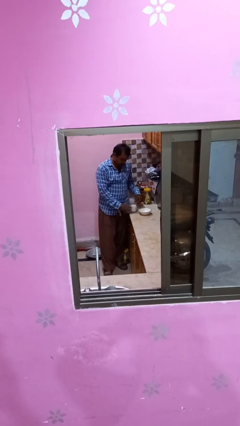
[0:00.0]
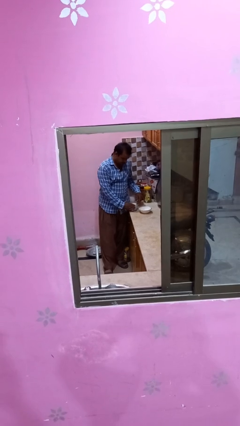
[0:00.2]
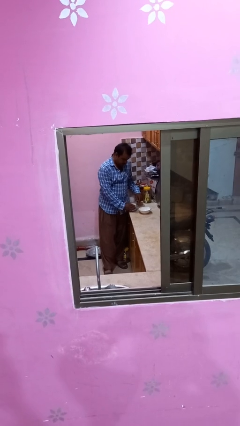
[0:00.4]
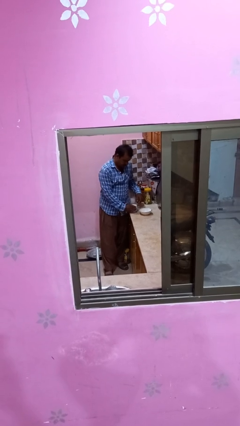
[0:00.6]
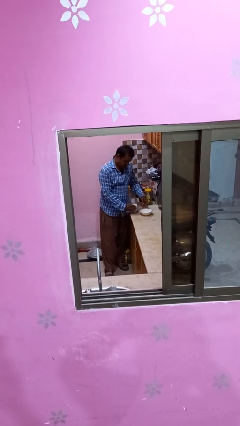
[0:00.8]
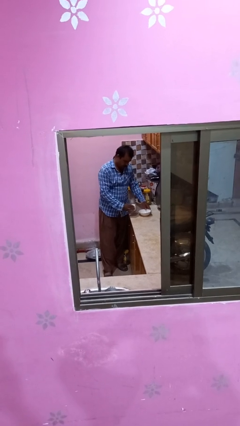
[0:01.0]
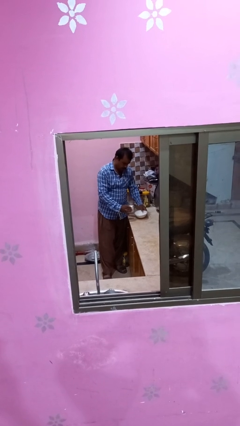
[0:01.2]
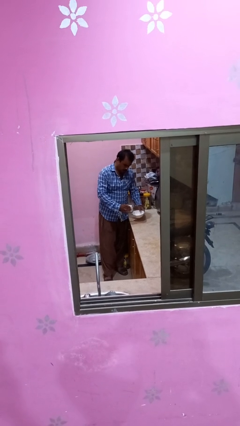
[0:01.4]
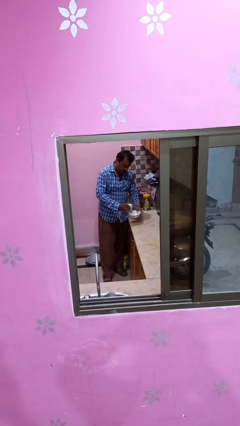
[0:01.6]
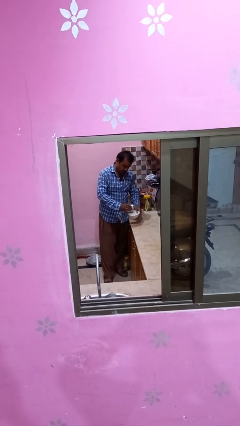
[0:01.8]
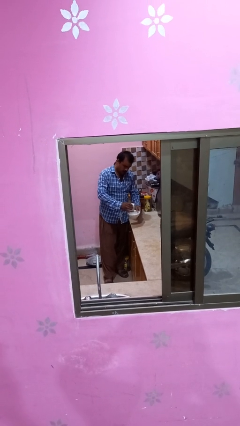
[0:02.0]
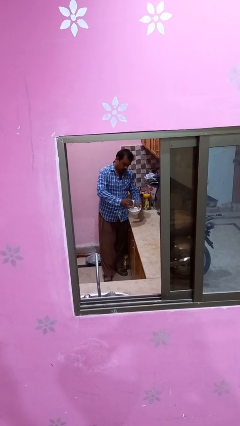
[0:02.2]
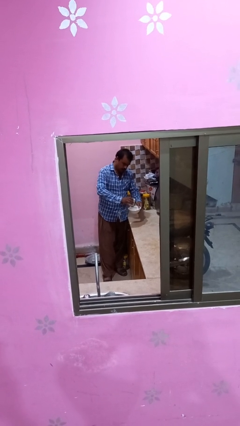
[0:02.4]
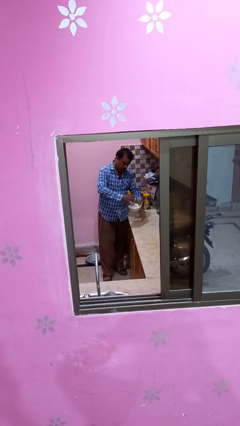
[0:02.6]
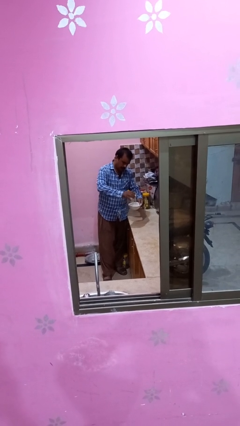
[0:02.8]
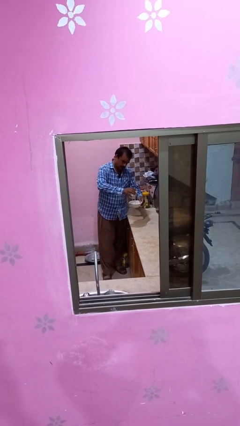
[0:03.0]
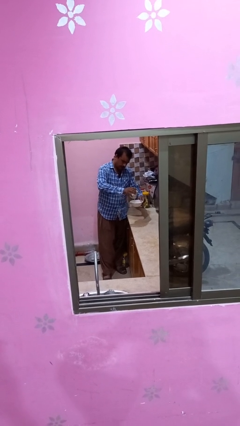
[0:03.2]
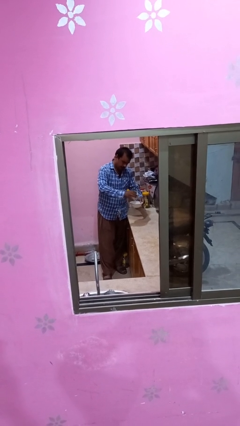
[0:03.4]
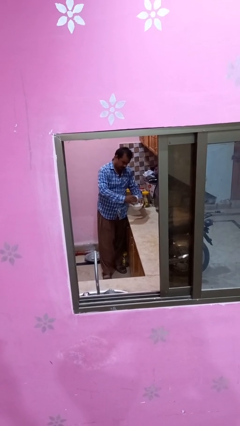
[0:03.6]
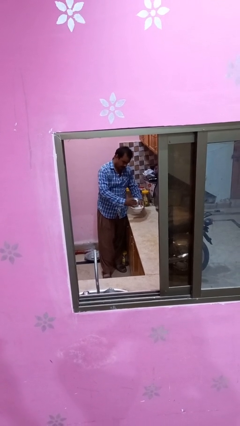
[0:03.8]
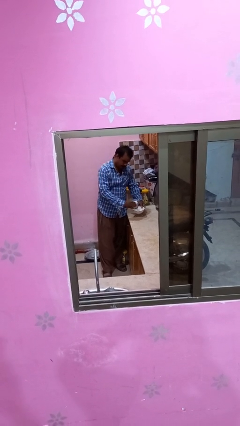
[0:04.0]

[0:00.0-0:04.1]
person pours into bowl

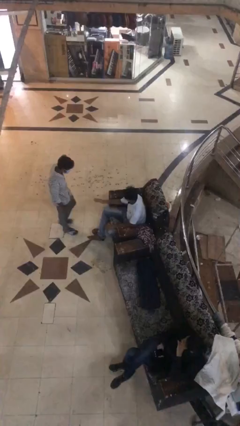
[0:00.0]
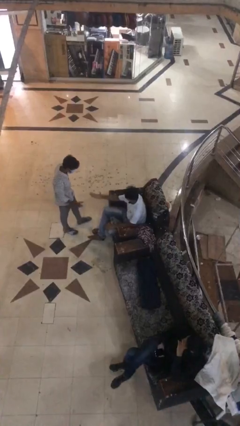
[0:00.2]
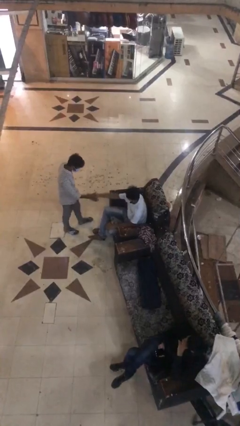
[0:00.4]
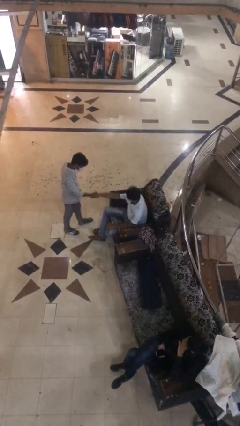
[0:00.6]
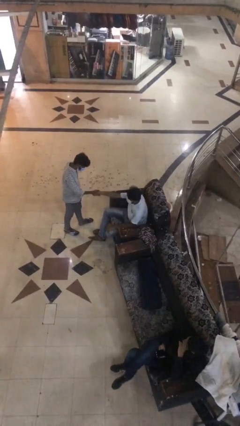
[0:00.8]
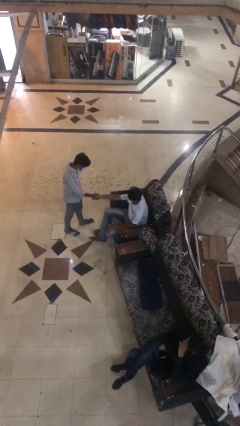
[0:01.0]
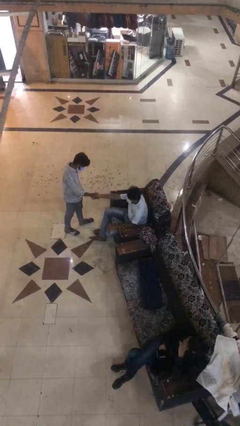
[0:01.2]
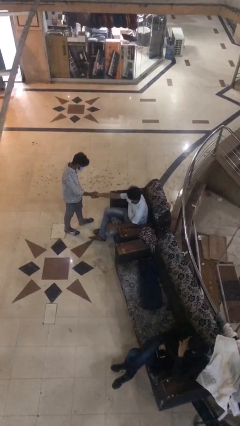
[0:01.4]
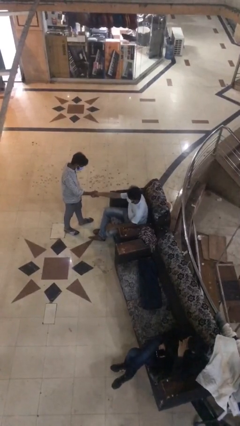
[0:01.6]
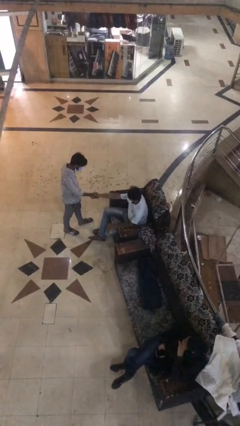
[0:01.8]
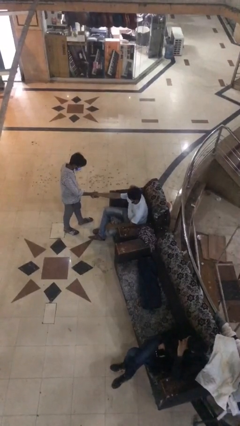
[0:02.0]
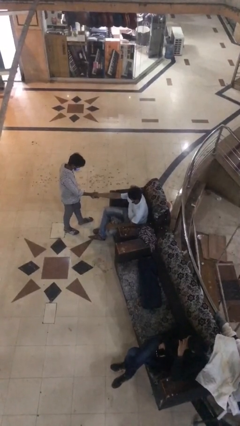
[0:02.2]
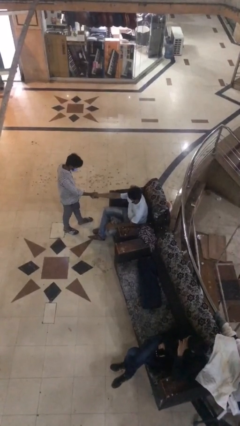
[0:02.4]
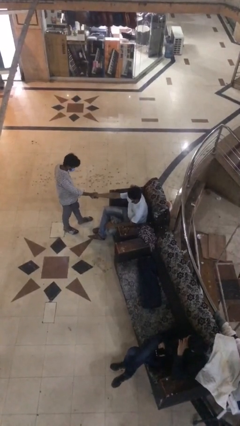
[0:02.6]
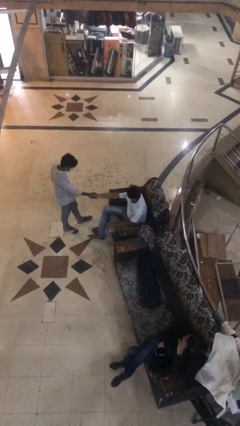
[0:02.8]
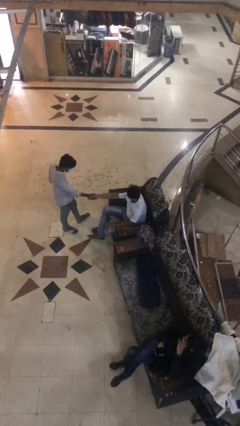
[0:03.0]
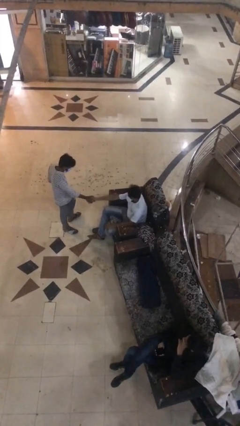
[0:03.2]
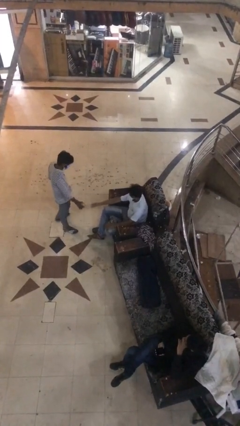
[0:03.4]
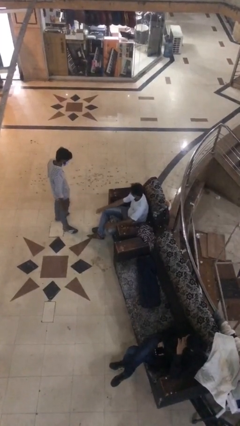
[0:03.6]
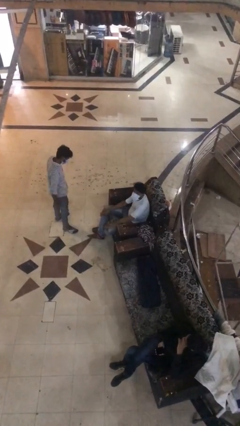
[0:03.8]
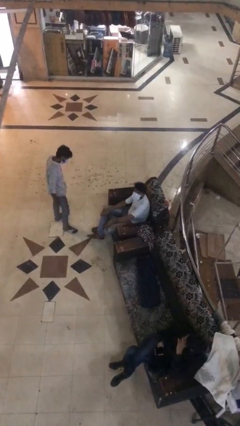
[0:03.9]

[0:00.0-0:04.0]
person shakes hand

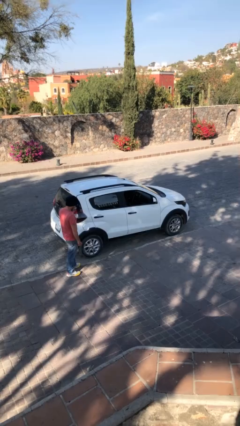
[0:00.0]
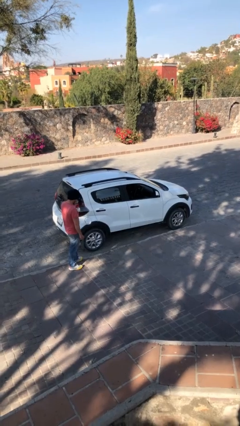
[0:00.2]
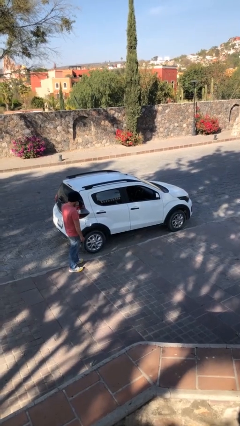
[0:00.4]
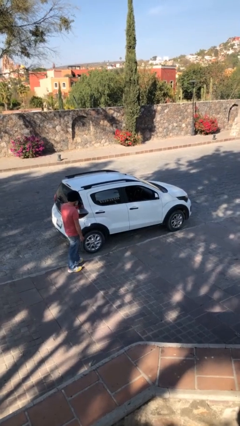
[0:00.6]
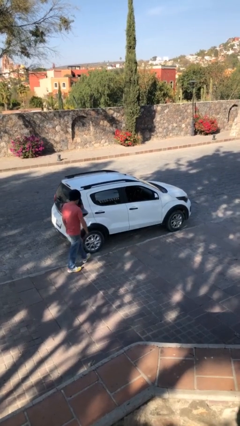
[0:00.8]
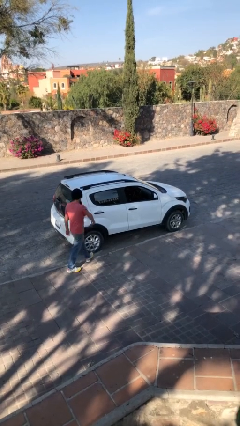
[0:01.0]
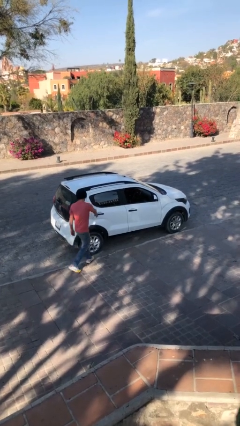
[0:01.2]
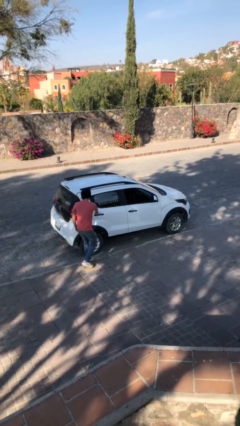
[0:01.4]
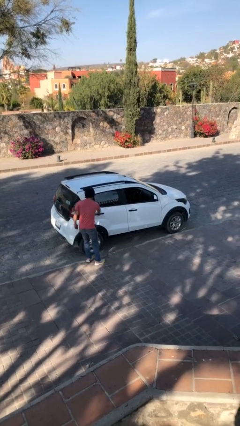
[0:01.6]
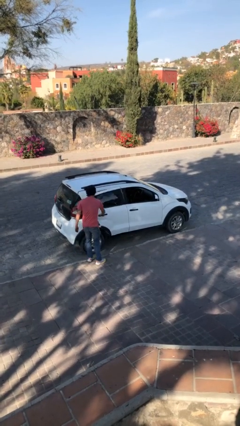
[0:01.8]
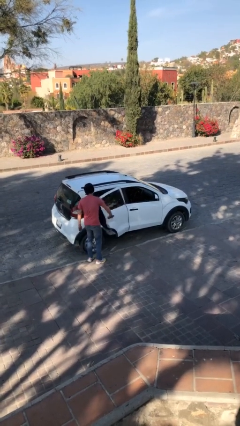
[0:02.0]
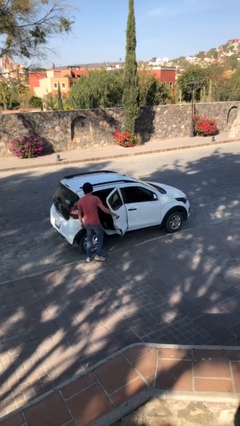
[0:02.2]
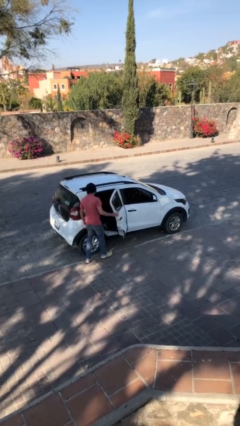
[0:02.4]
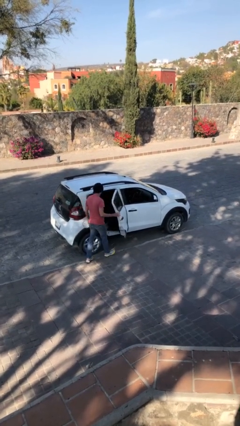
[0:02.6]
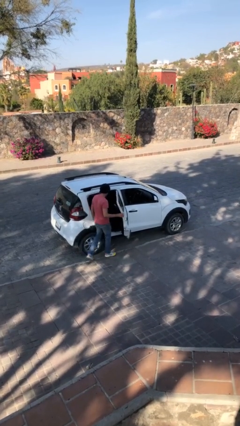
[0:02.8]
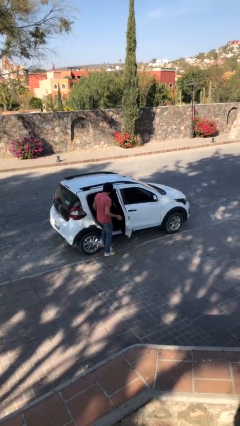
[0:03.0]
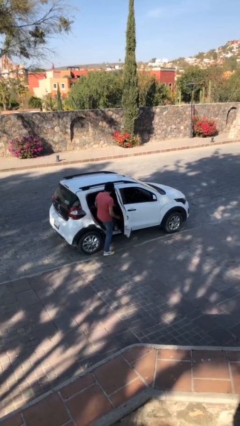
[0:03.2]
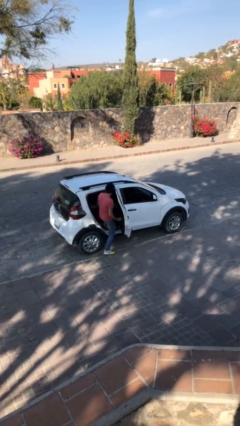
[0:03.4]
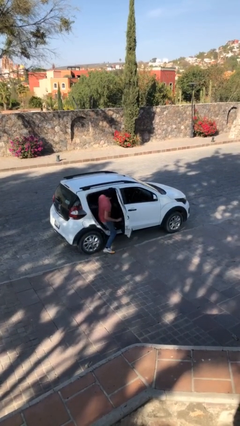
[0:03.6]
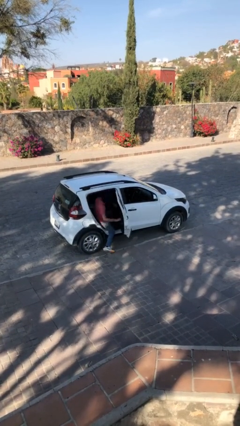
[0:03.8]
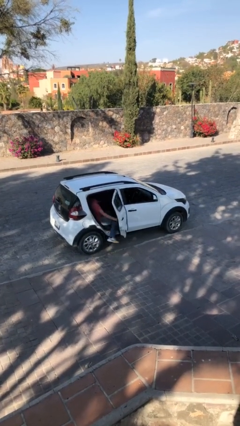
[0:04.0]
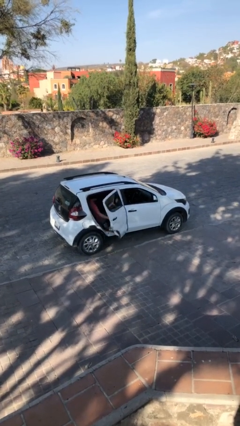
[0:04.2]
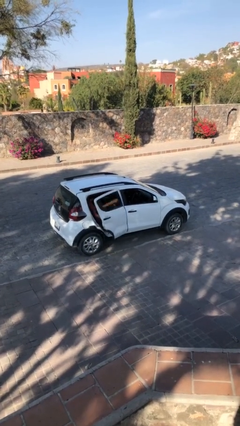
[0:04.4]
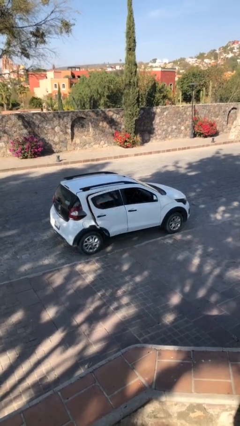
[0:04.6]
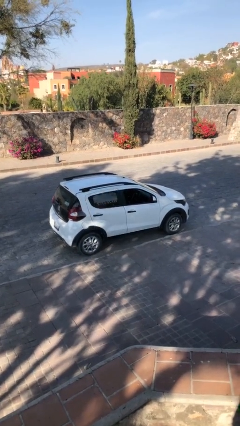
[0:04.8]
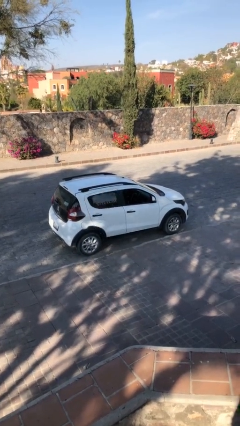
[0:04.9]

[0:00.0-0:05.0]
car picks up person

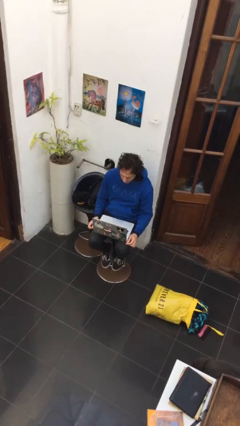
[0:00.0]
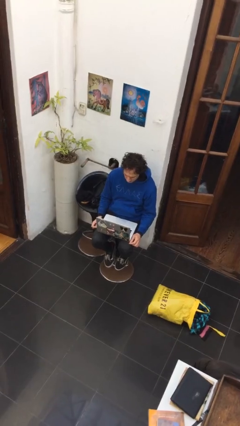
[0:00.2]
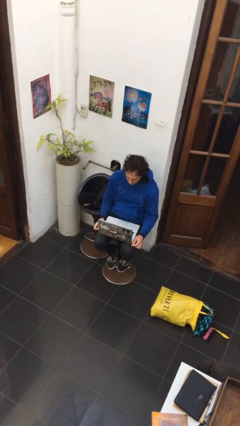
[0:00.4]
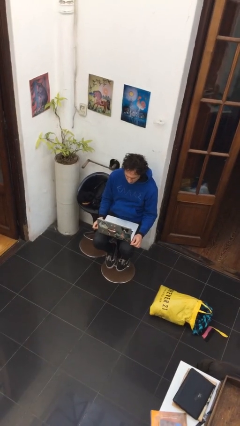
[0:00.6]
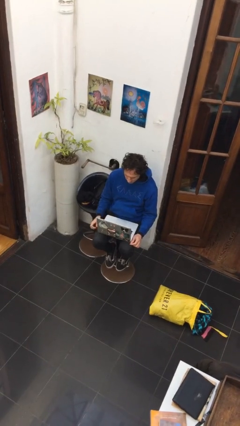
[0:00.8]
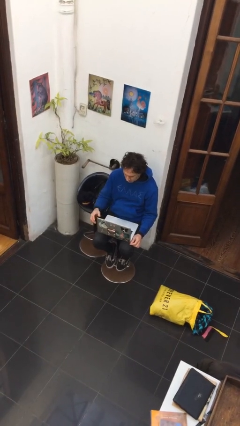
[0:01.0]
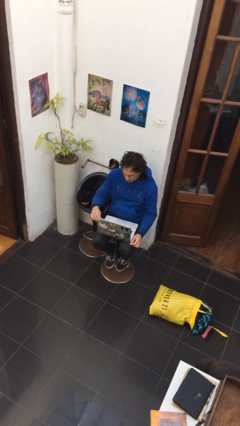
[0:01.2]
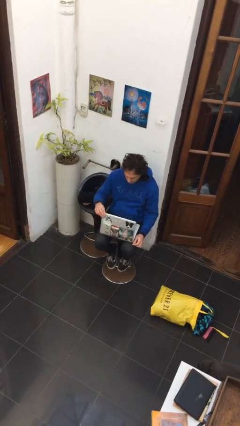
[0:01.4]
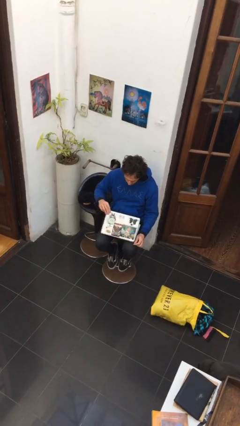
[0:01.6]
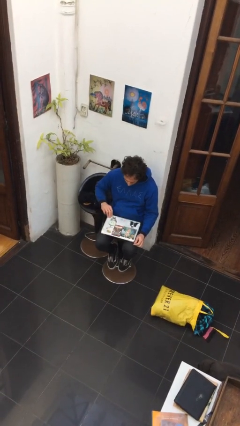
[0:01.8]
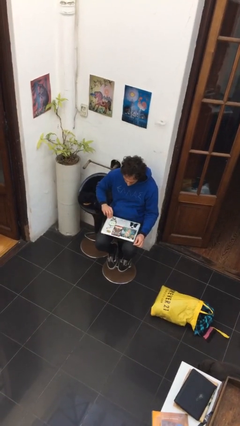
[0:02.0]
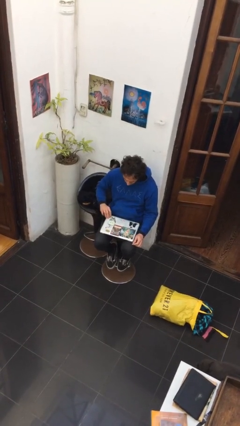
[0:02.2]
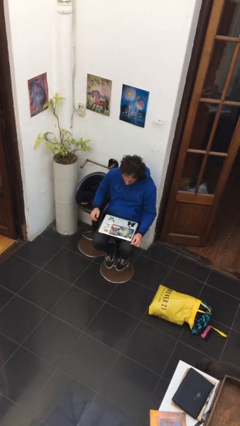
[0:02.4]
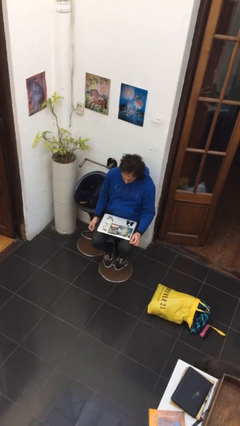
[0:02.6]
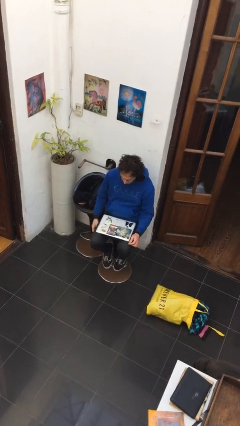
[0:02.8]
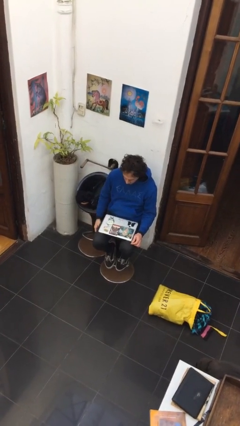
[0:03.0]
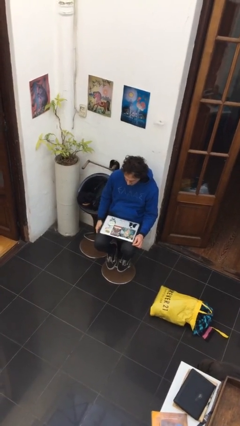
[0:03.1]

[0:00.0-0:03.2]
person closes laptop

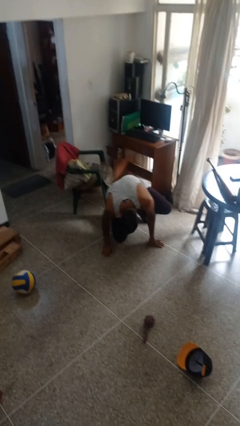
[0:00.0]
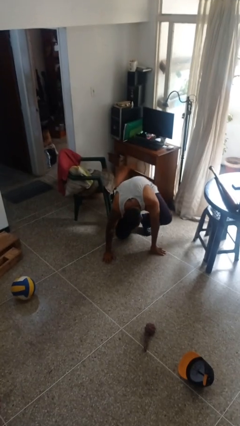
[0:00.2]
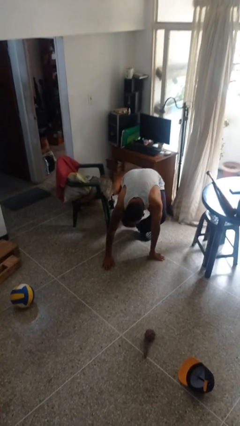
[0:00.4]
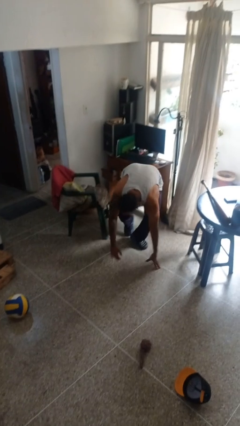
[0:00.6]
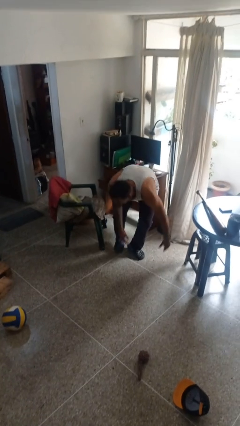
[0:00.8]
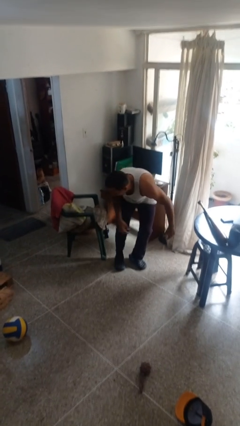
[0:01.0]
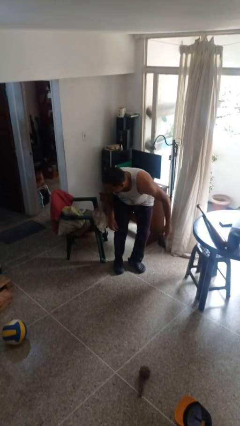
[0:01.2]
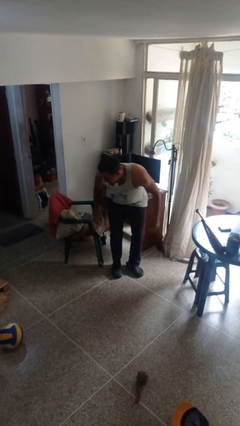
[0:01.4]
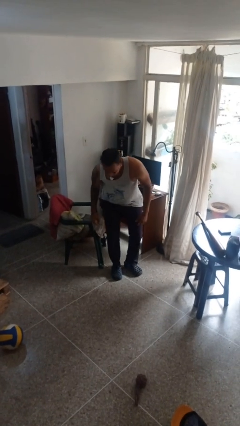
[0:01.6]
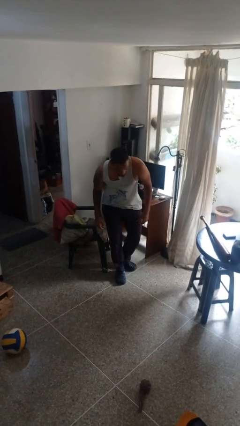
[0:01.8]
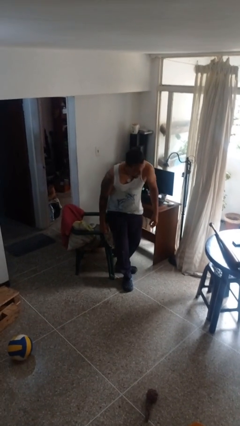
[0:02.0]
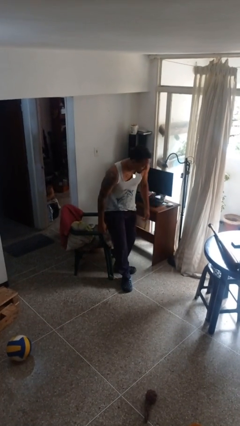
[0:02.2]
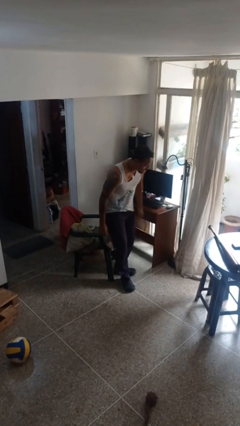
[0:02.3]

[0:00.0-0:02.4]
person stands up from floor
